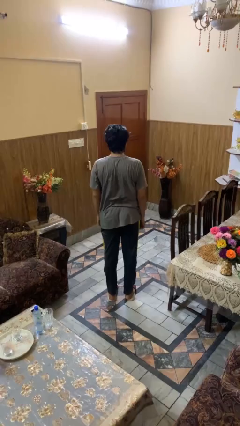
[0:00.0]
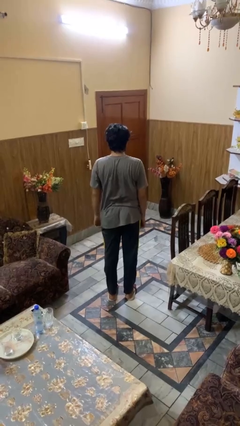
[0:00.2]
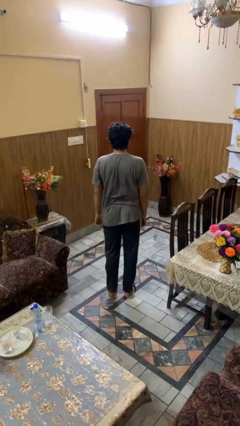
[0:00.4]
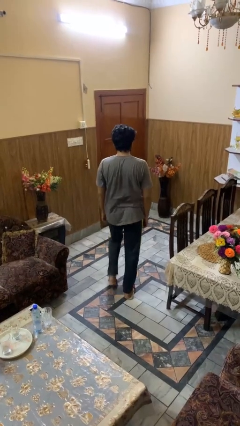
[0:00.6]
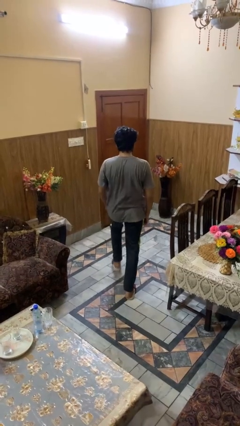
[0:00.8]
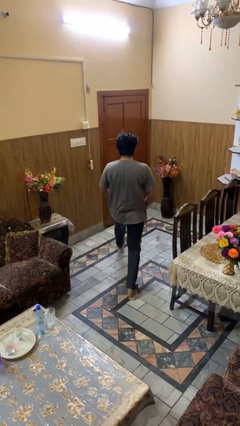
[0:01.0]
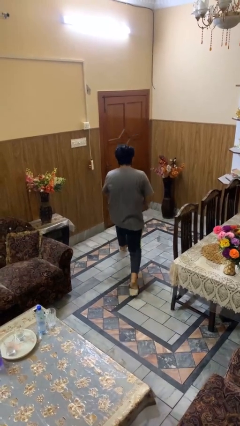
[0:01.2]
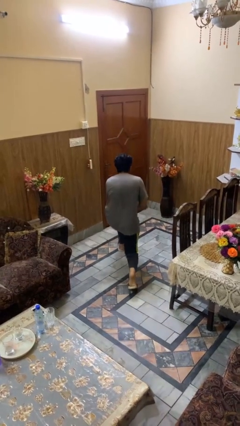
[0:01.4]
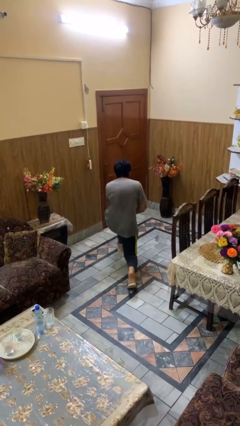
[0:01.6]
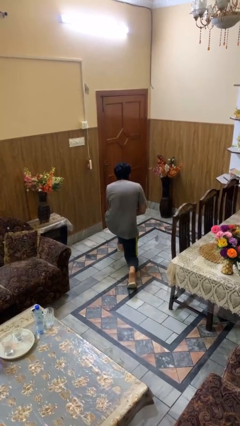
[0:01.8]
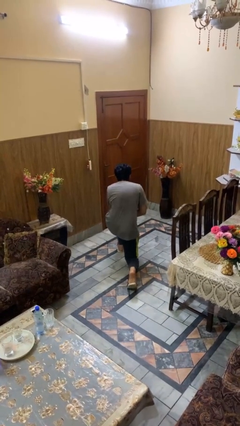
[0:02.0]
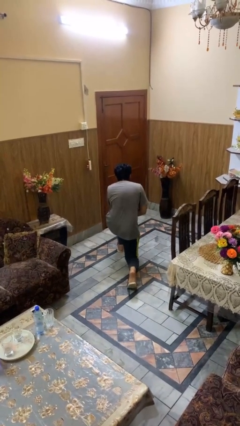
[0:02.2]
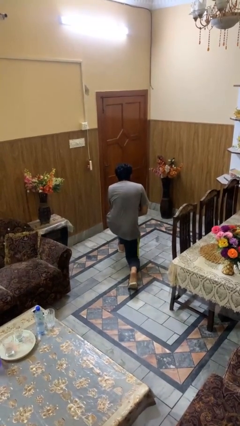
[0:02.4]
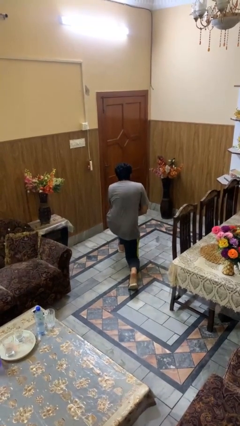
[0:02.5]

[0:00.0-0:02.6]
person kneels

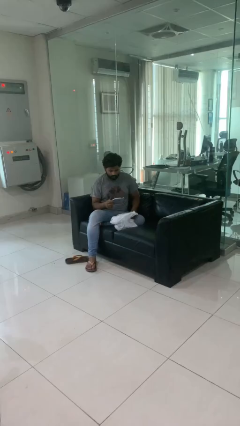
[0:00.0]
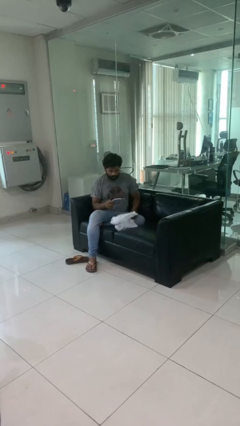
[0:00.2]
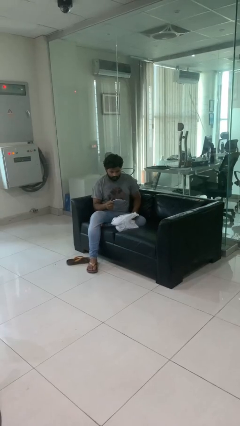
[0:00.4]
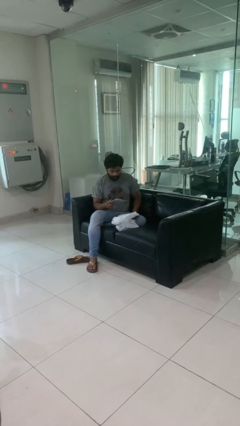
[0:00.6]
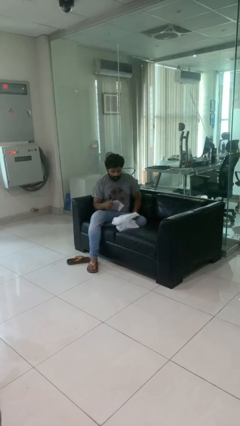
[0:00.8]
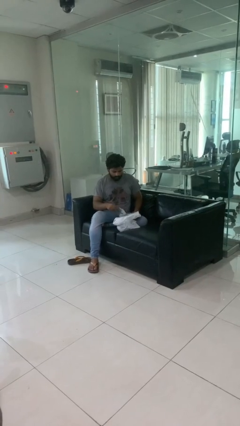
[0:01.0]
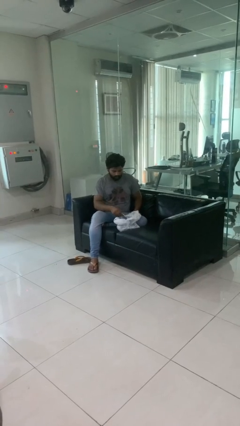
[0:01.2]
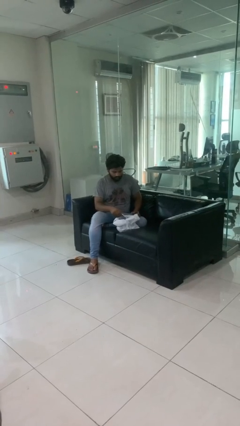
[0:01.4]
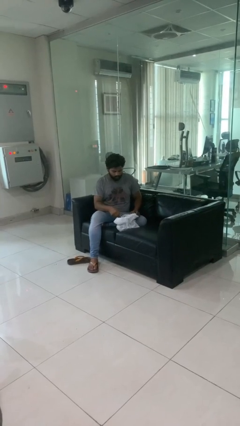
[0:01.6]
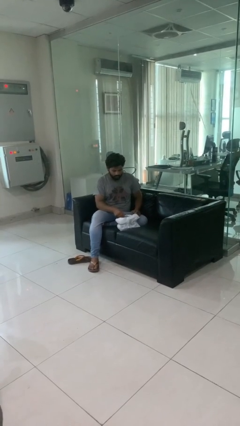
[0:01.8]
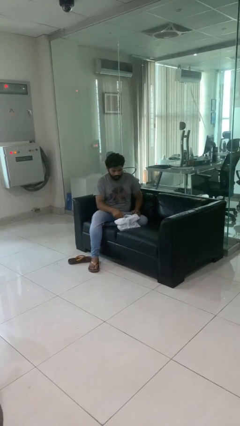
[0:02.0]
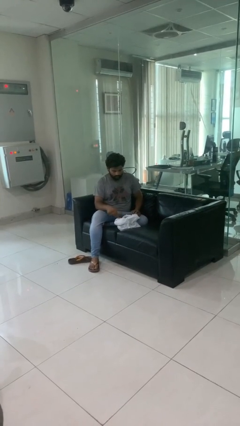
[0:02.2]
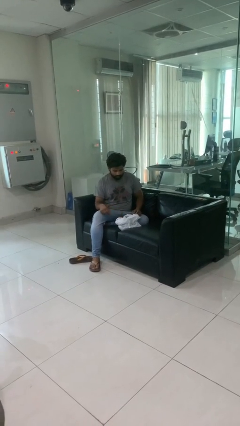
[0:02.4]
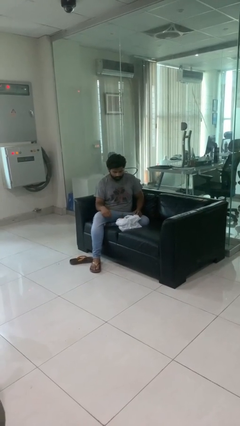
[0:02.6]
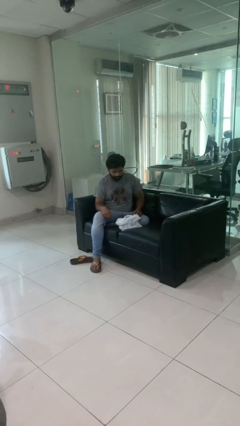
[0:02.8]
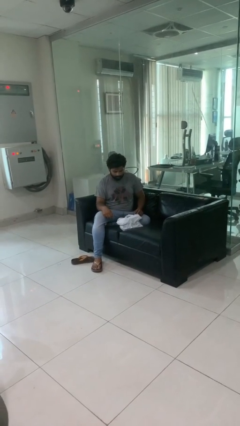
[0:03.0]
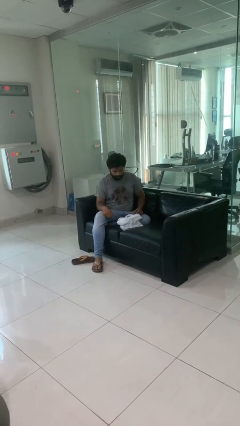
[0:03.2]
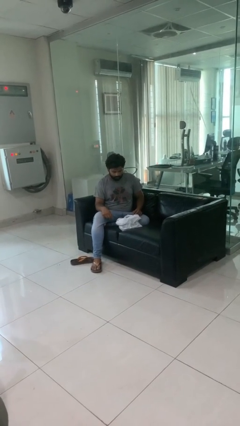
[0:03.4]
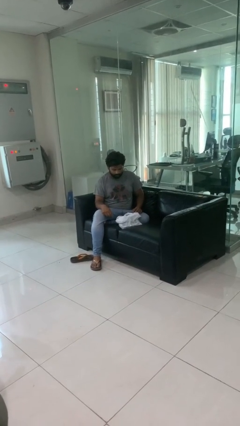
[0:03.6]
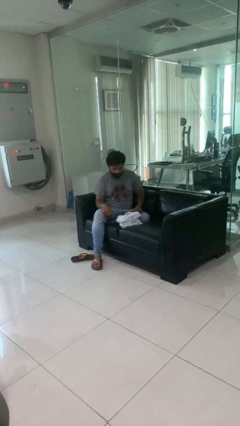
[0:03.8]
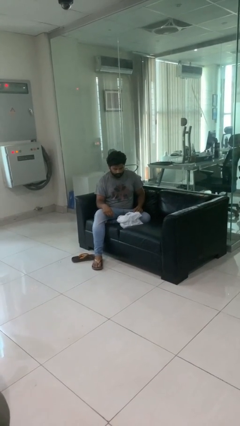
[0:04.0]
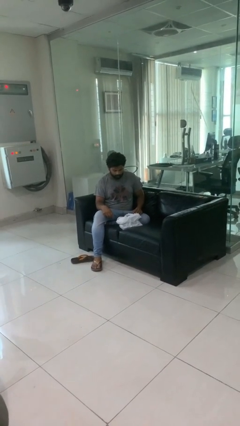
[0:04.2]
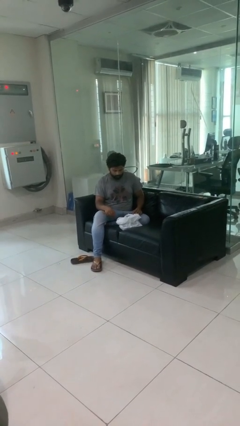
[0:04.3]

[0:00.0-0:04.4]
person puts object into bag

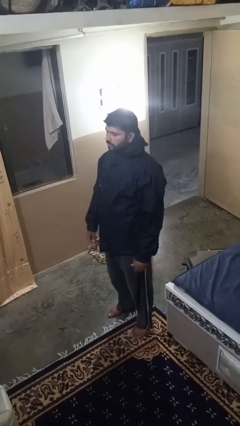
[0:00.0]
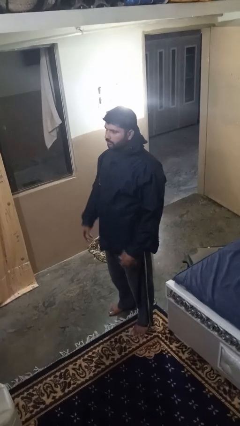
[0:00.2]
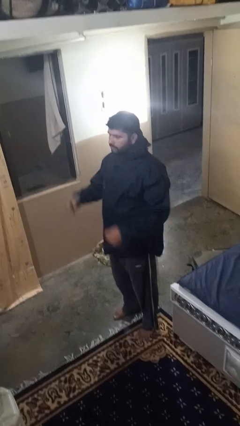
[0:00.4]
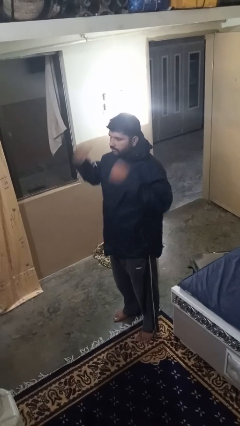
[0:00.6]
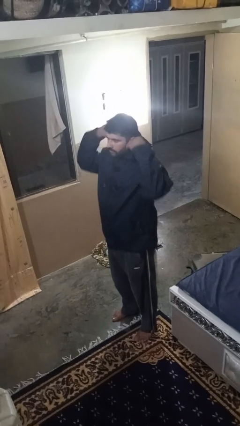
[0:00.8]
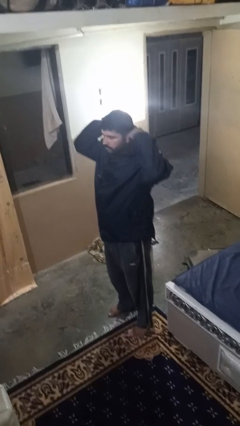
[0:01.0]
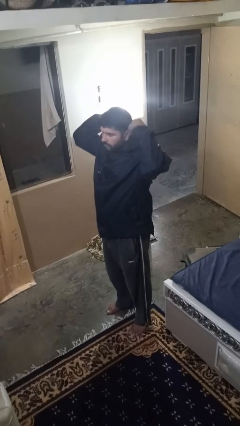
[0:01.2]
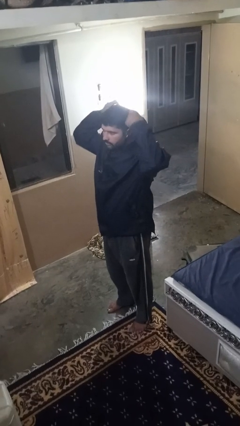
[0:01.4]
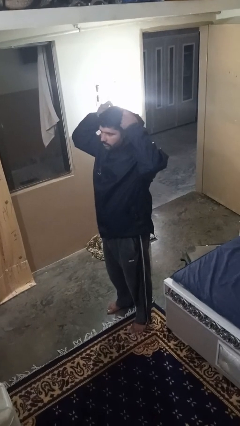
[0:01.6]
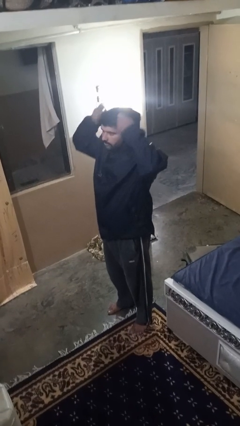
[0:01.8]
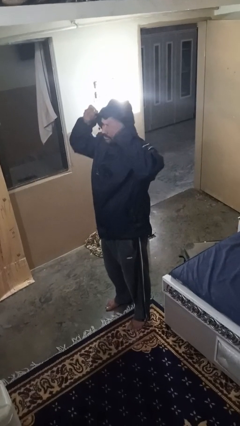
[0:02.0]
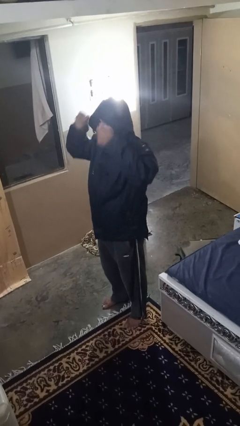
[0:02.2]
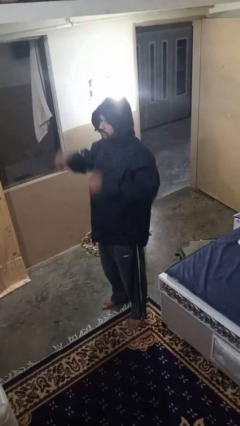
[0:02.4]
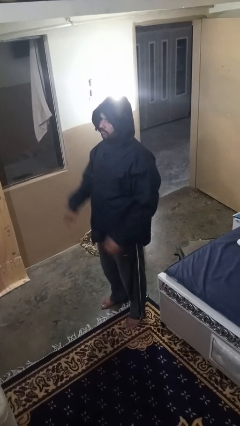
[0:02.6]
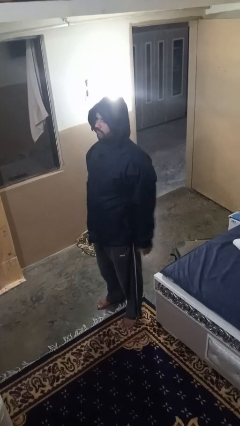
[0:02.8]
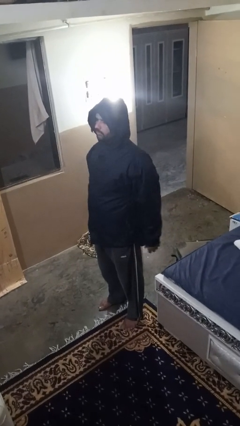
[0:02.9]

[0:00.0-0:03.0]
person puts on hoodie

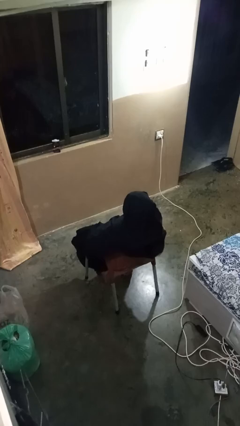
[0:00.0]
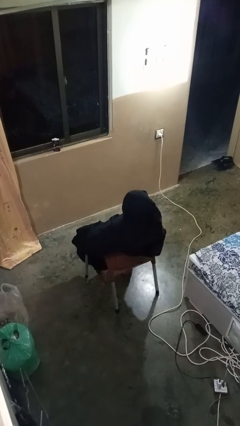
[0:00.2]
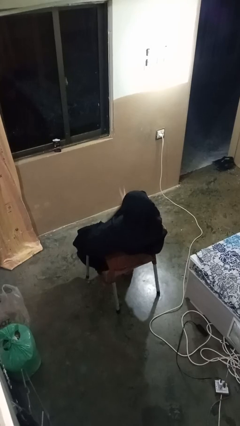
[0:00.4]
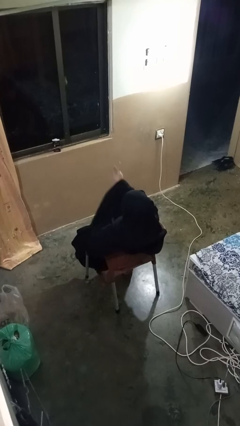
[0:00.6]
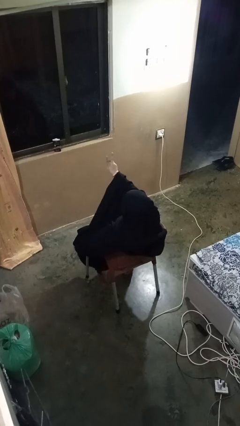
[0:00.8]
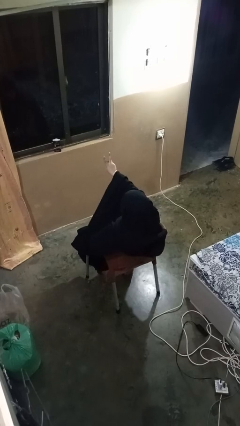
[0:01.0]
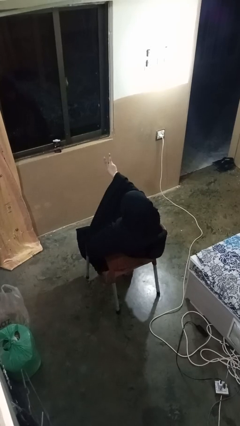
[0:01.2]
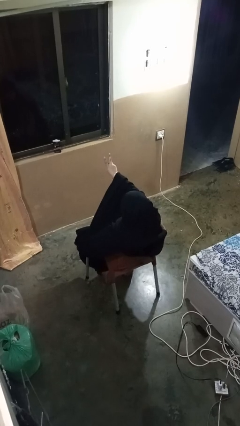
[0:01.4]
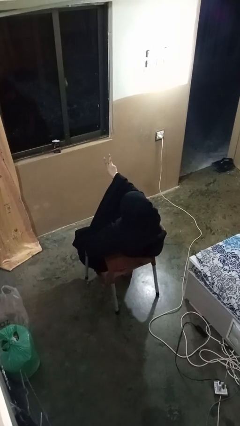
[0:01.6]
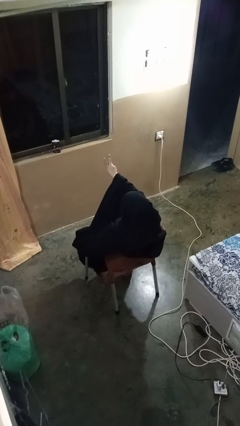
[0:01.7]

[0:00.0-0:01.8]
person gestures peace

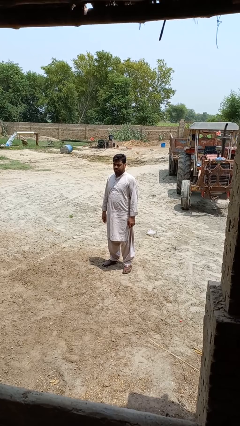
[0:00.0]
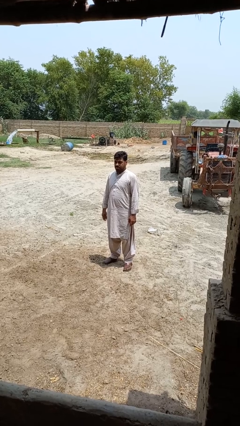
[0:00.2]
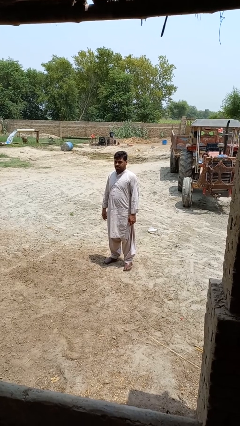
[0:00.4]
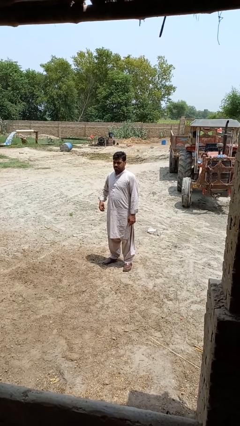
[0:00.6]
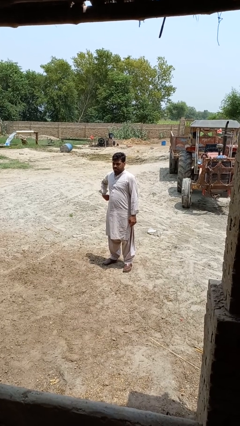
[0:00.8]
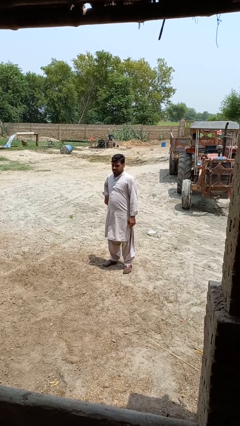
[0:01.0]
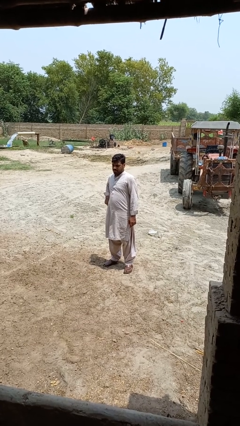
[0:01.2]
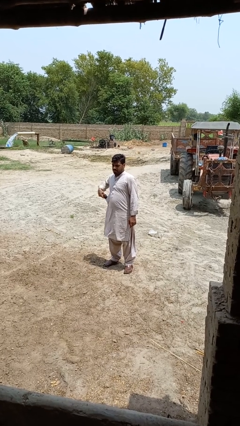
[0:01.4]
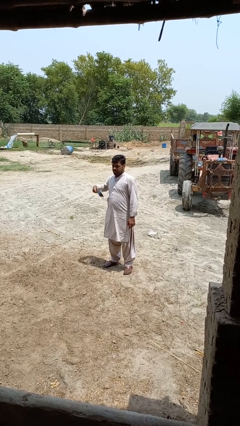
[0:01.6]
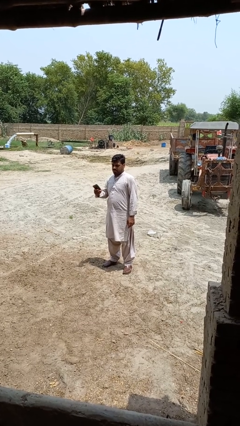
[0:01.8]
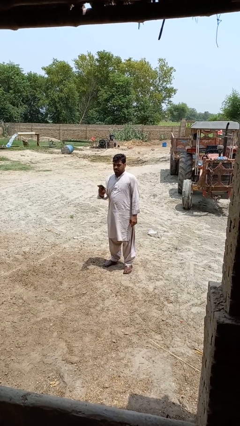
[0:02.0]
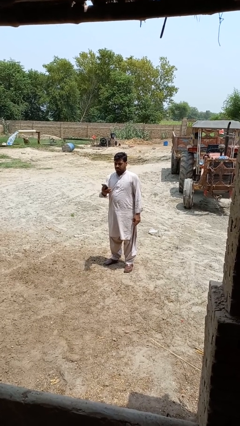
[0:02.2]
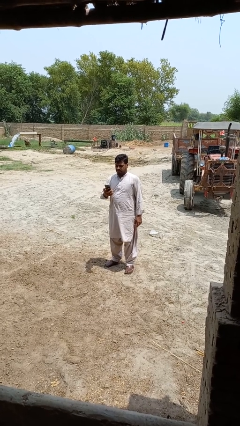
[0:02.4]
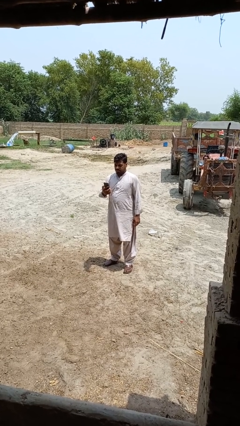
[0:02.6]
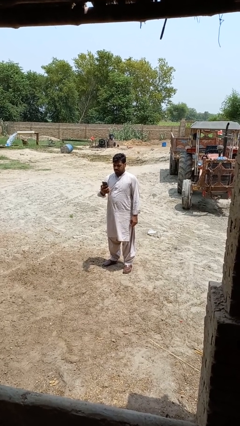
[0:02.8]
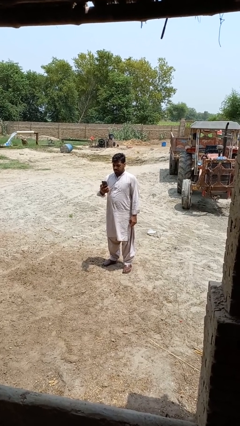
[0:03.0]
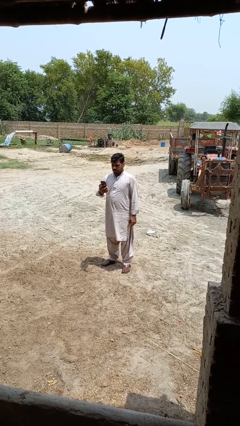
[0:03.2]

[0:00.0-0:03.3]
person takes phone from pocket

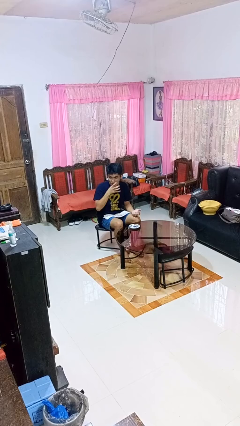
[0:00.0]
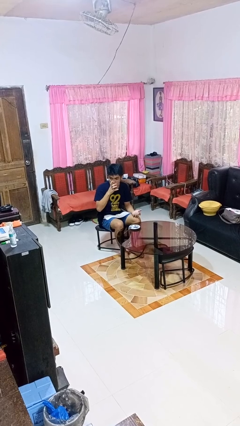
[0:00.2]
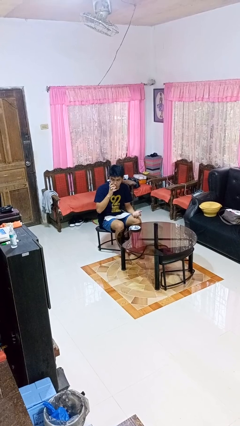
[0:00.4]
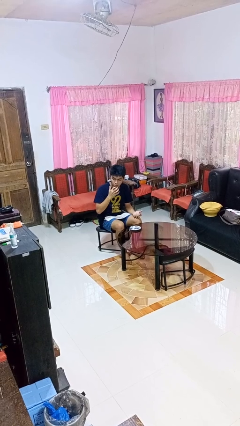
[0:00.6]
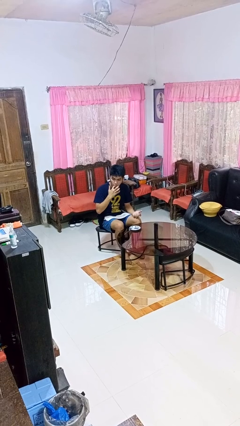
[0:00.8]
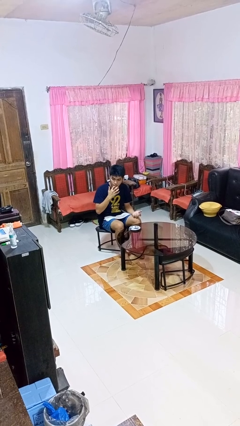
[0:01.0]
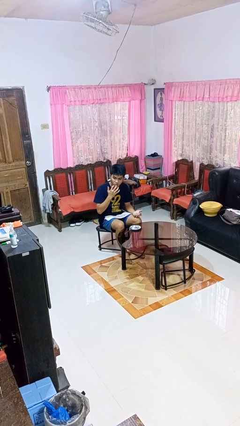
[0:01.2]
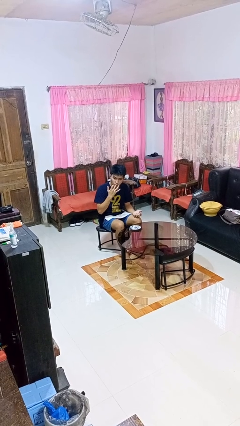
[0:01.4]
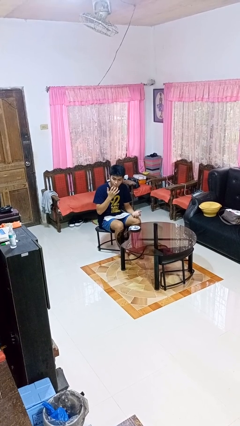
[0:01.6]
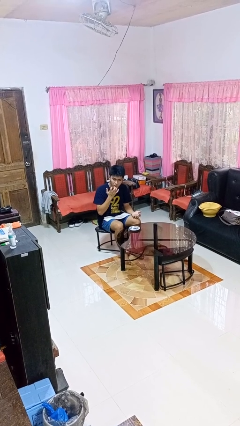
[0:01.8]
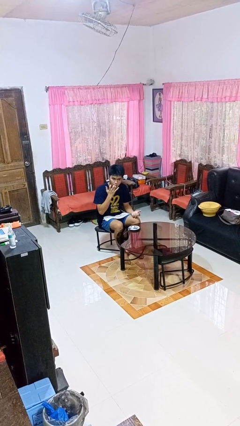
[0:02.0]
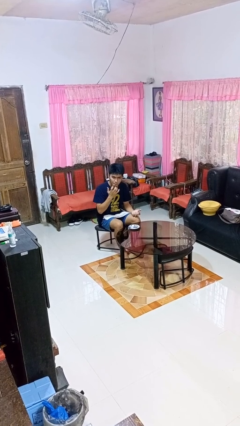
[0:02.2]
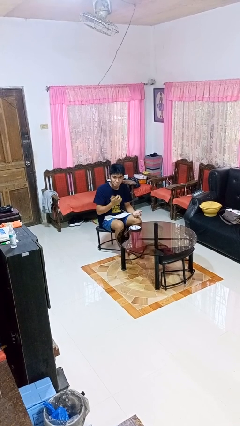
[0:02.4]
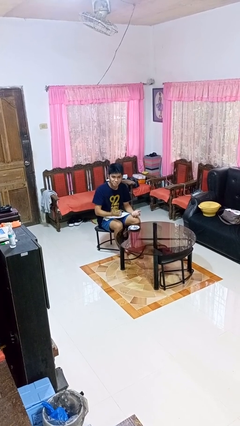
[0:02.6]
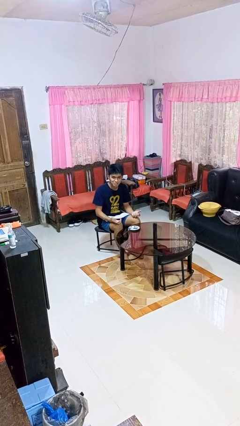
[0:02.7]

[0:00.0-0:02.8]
person licks fingers
